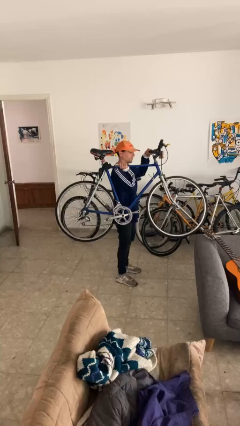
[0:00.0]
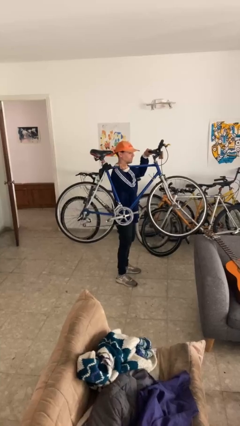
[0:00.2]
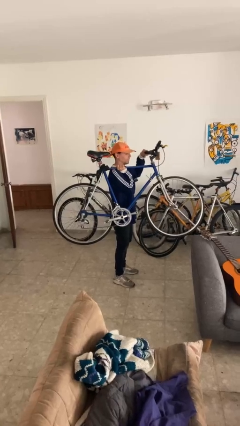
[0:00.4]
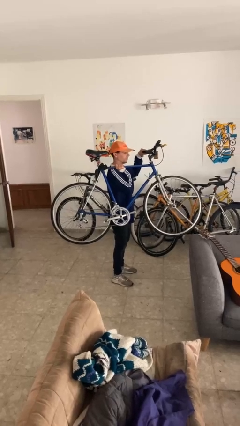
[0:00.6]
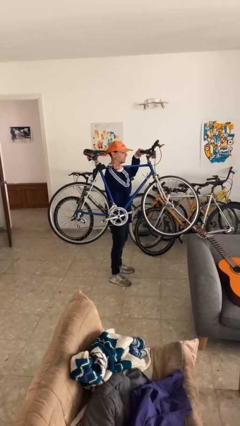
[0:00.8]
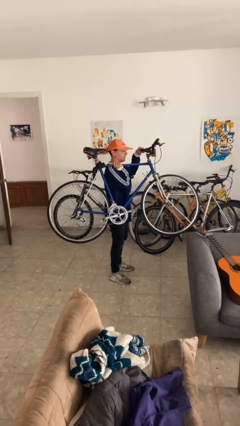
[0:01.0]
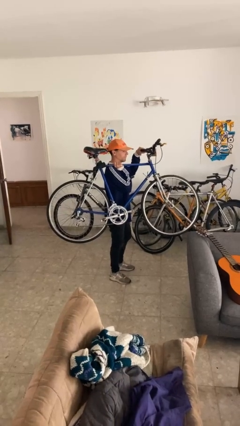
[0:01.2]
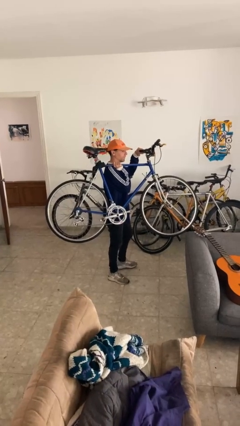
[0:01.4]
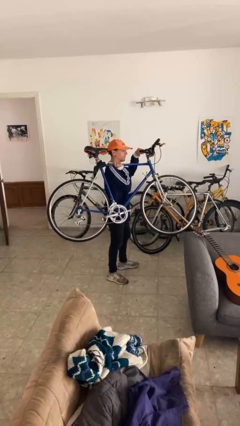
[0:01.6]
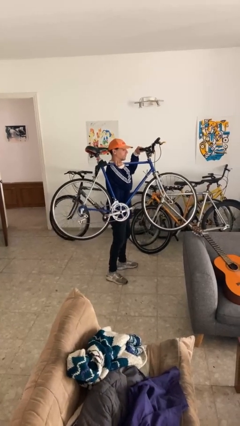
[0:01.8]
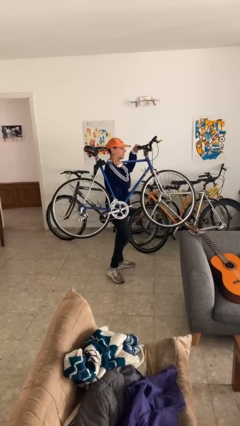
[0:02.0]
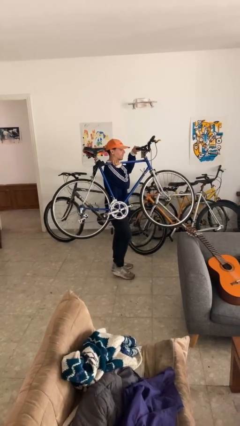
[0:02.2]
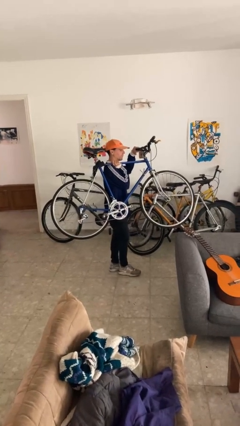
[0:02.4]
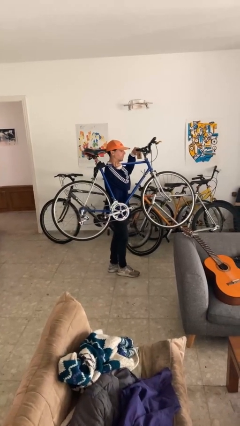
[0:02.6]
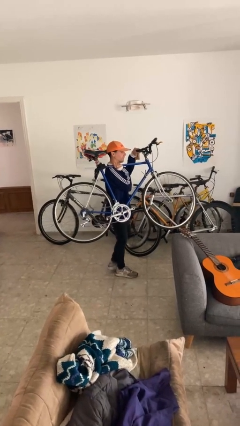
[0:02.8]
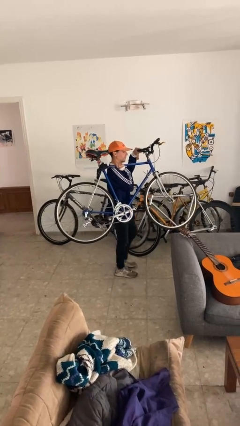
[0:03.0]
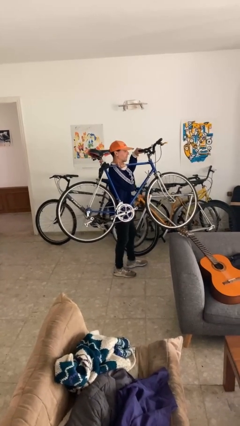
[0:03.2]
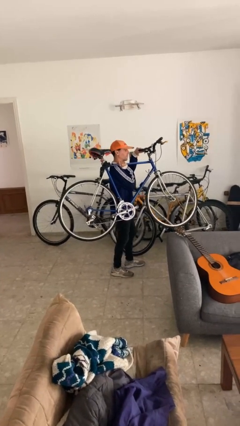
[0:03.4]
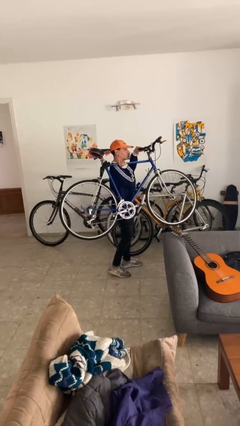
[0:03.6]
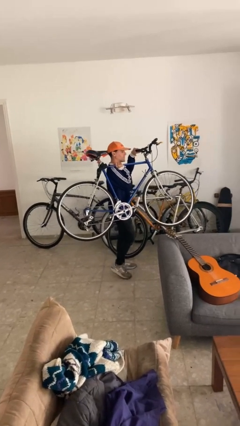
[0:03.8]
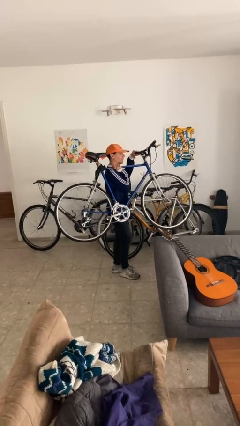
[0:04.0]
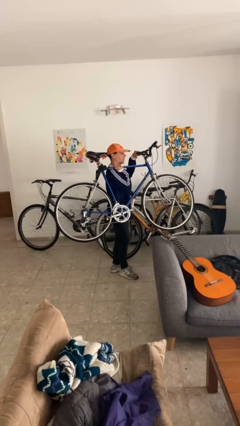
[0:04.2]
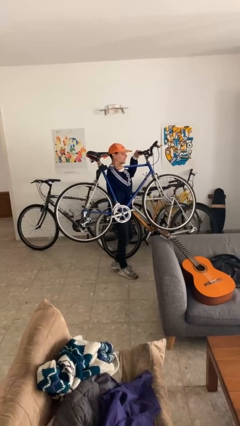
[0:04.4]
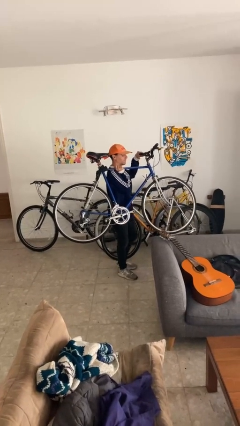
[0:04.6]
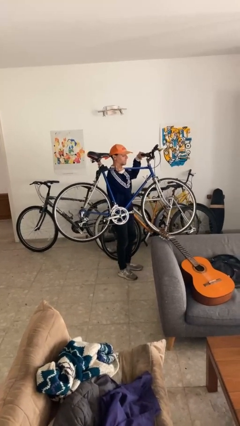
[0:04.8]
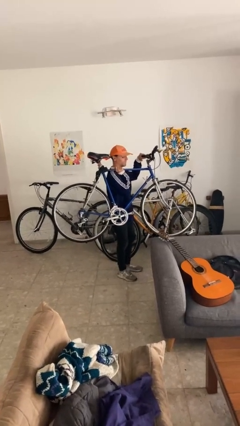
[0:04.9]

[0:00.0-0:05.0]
person carries bicycle

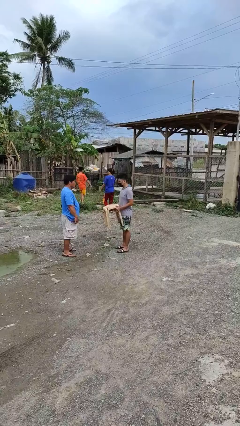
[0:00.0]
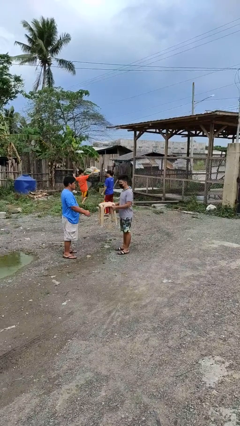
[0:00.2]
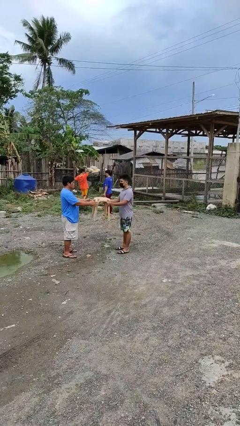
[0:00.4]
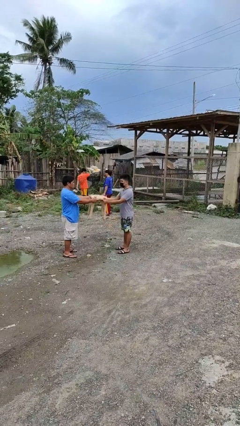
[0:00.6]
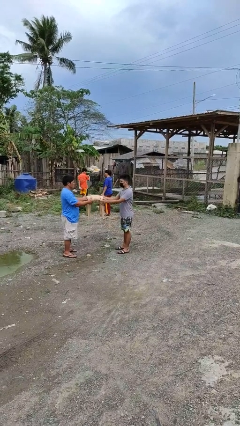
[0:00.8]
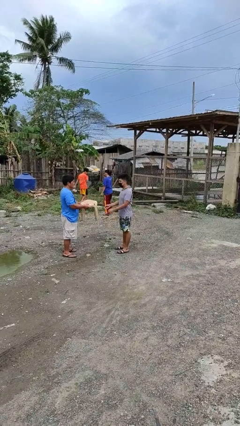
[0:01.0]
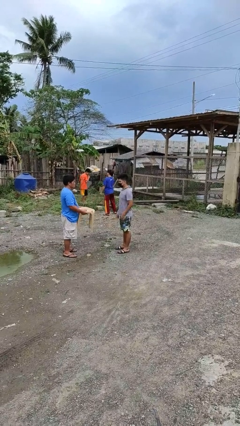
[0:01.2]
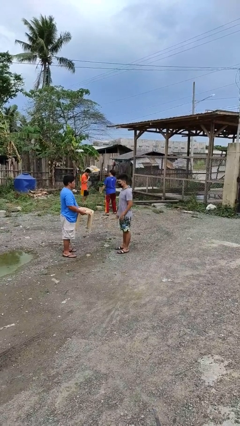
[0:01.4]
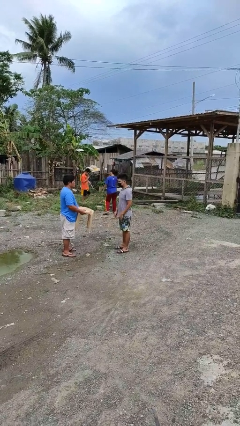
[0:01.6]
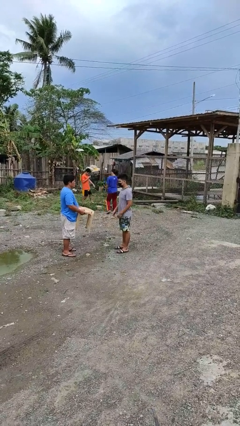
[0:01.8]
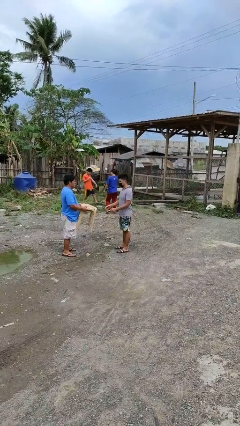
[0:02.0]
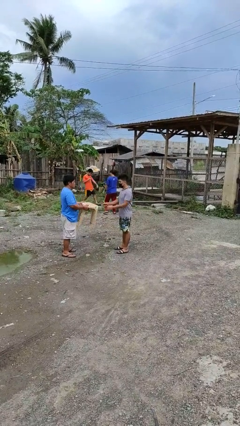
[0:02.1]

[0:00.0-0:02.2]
person transfers object to person

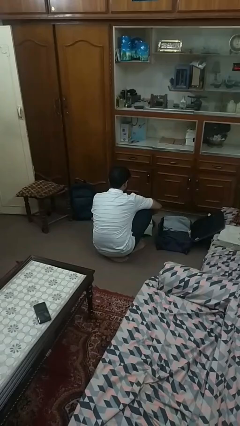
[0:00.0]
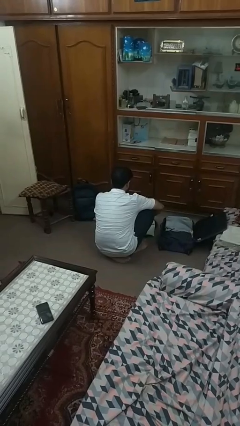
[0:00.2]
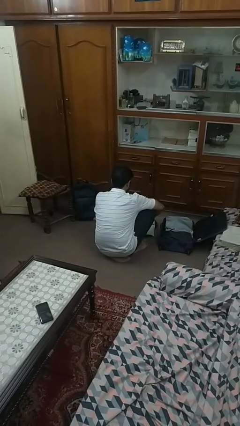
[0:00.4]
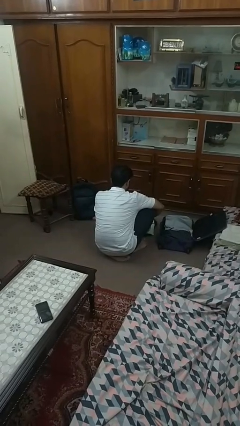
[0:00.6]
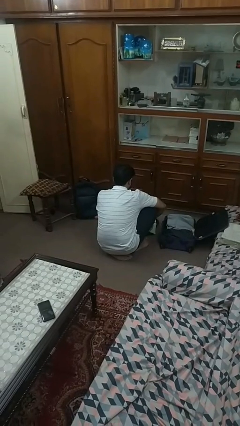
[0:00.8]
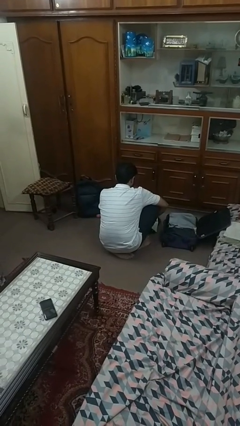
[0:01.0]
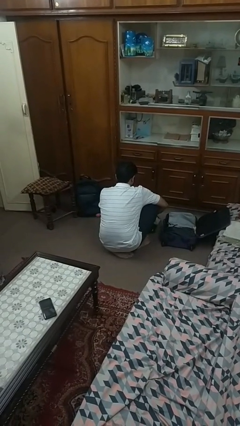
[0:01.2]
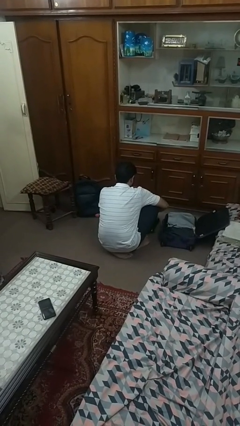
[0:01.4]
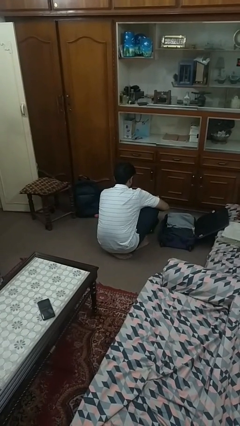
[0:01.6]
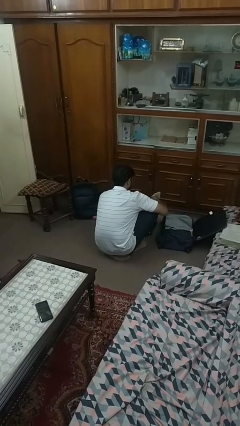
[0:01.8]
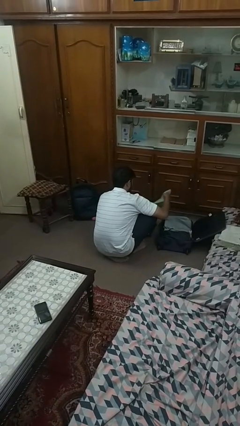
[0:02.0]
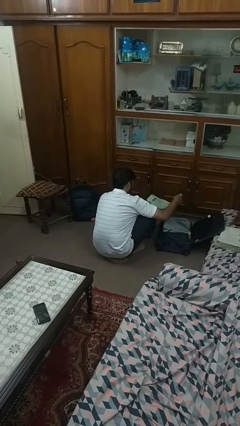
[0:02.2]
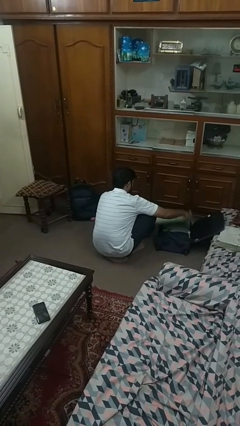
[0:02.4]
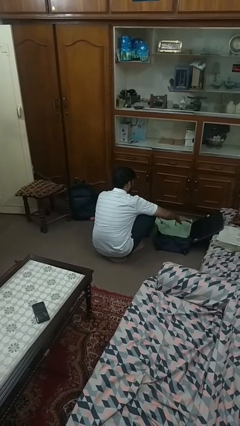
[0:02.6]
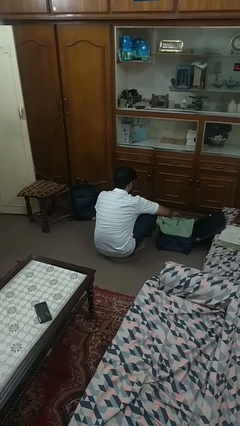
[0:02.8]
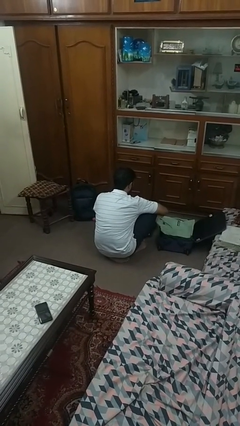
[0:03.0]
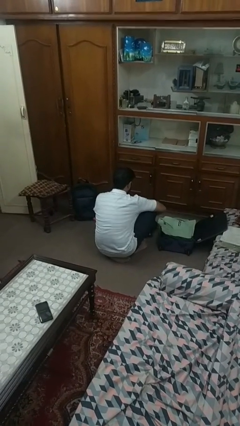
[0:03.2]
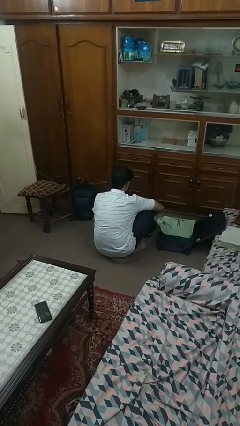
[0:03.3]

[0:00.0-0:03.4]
person loads clothes into suitcase

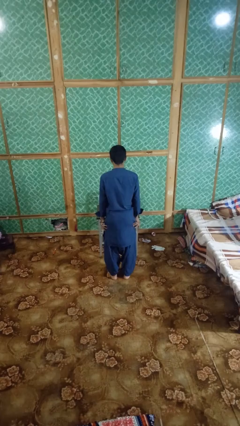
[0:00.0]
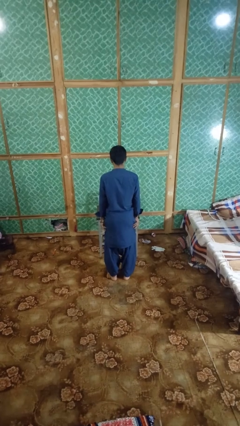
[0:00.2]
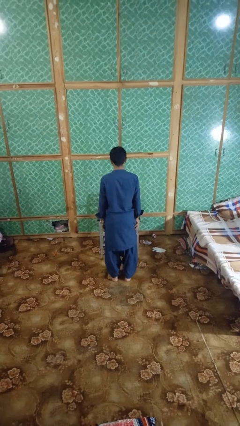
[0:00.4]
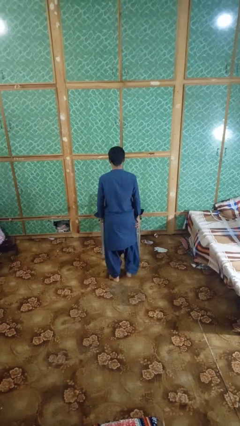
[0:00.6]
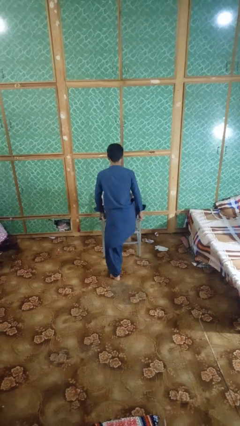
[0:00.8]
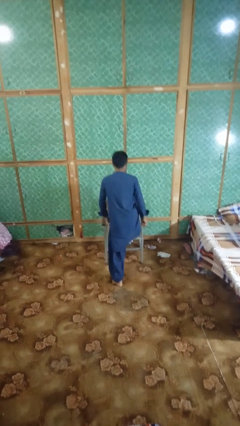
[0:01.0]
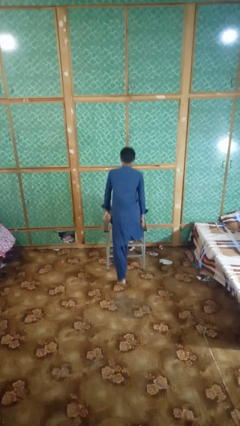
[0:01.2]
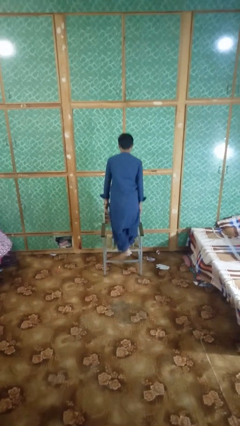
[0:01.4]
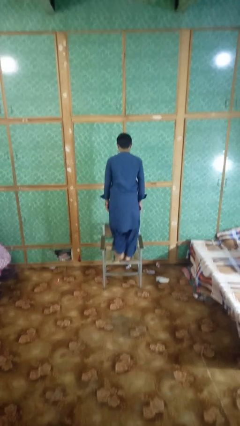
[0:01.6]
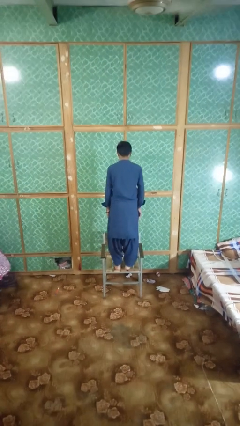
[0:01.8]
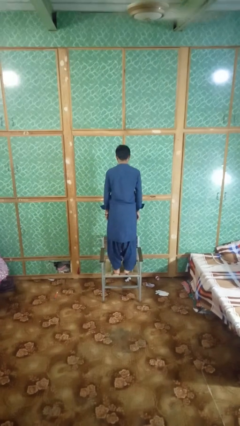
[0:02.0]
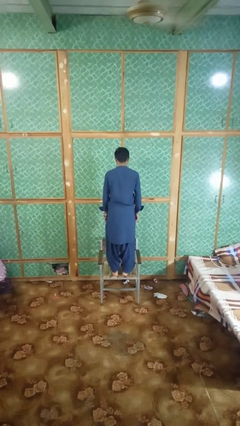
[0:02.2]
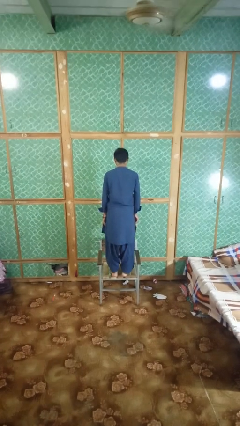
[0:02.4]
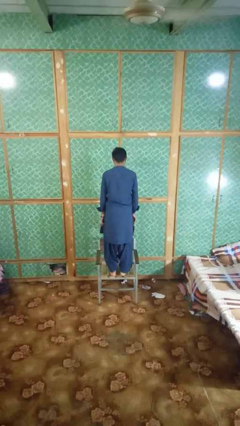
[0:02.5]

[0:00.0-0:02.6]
person climbs on chair

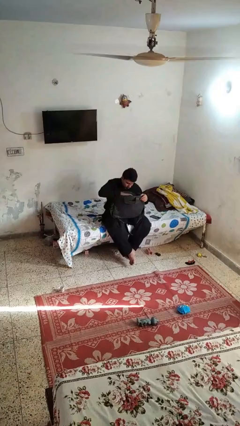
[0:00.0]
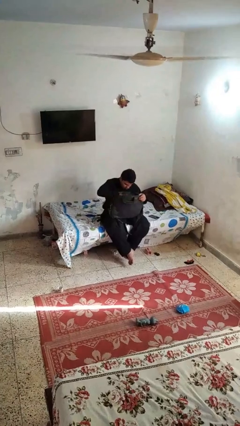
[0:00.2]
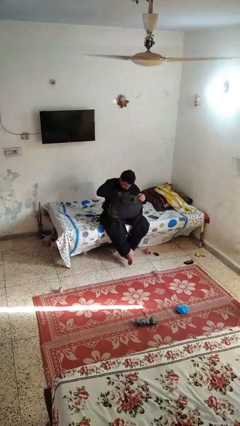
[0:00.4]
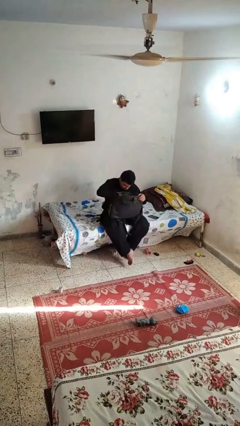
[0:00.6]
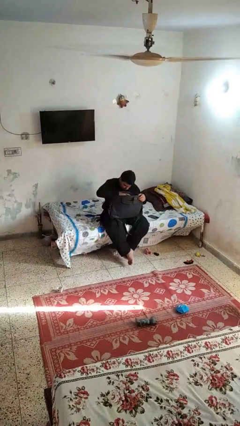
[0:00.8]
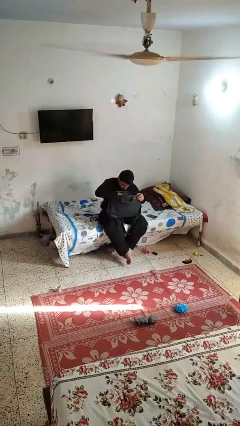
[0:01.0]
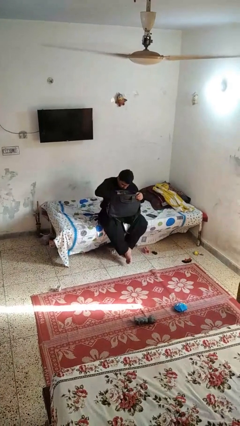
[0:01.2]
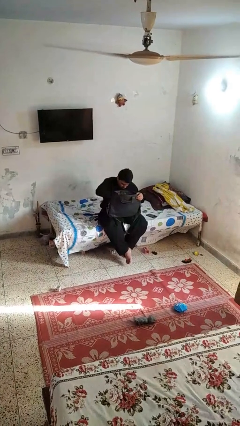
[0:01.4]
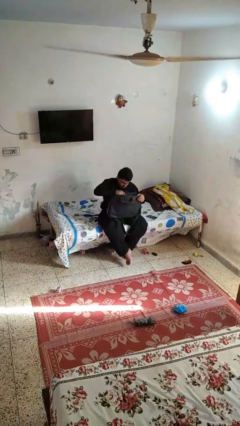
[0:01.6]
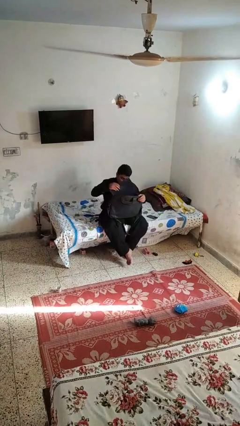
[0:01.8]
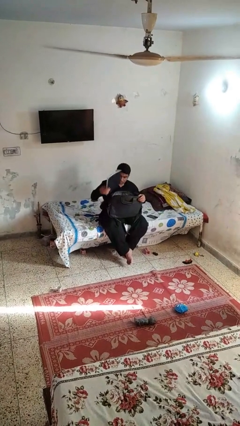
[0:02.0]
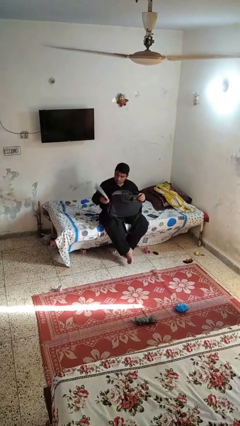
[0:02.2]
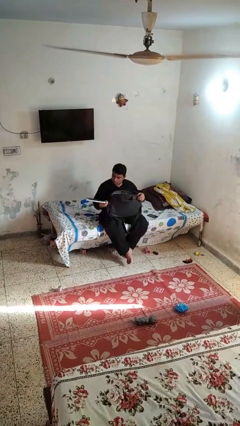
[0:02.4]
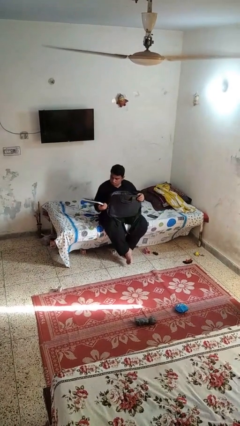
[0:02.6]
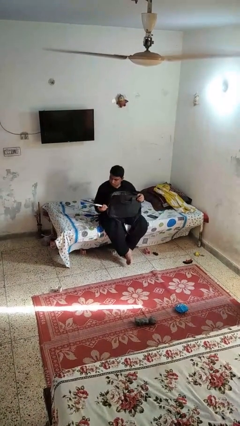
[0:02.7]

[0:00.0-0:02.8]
person takes object from backpack

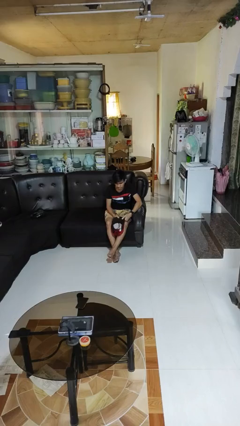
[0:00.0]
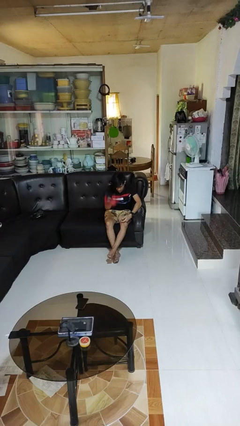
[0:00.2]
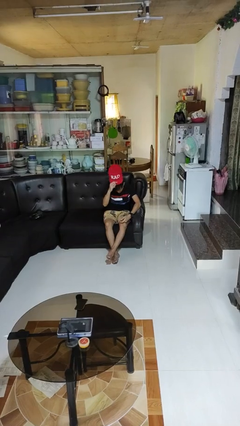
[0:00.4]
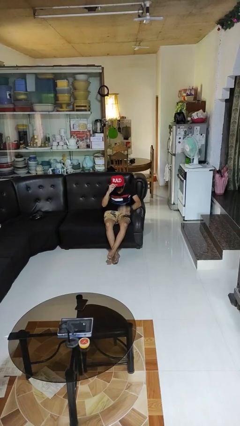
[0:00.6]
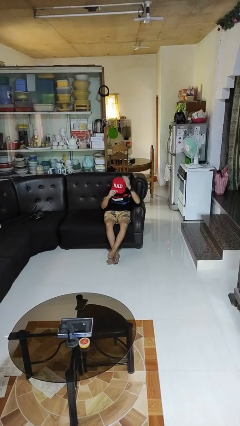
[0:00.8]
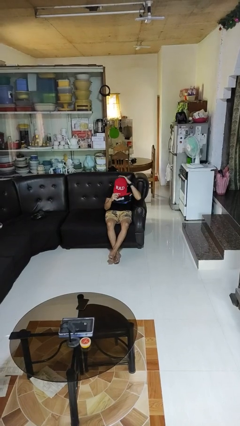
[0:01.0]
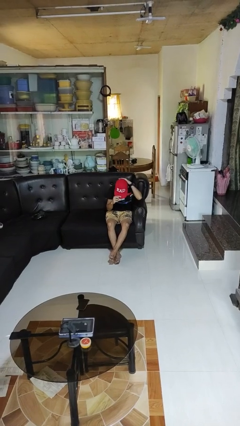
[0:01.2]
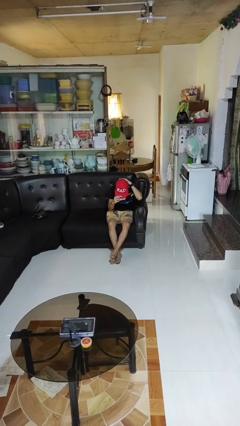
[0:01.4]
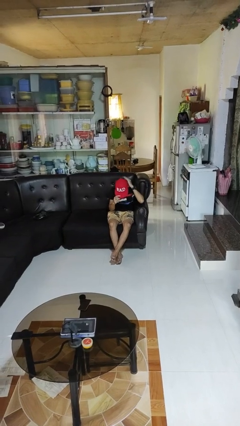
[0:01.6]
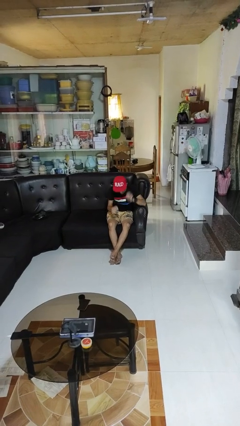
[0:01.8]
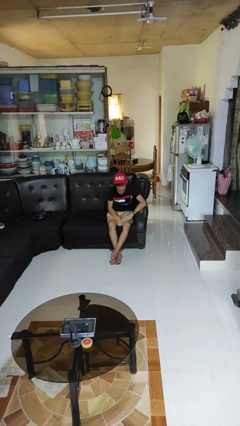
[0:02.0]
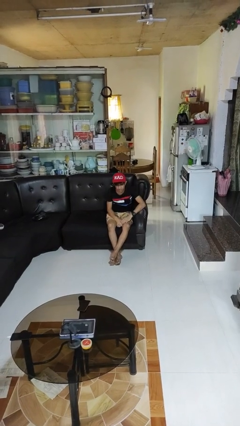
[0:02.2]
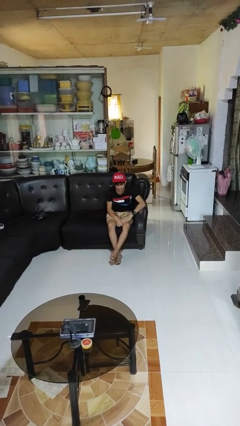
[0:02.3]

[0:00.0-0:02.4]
person puts on hat
